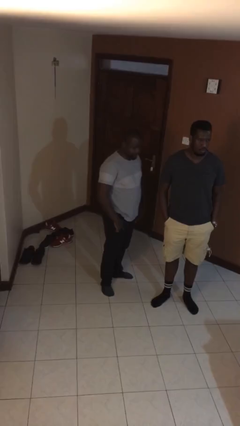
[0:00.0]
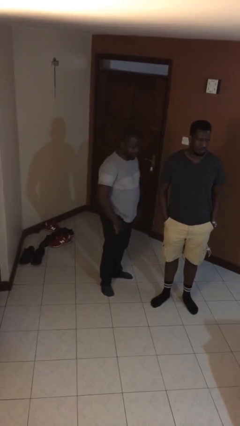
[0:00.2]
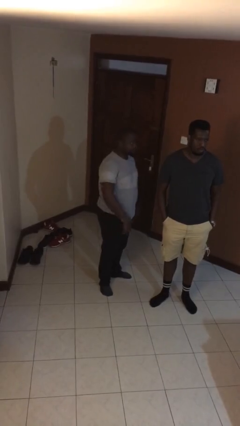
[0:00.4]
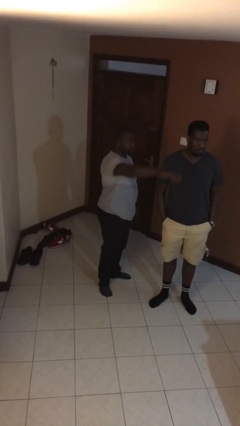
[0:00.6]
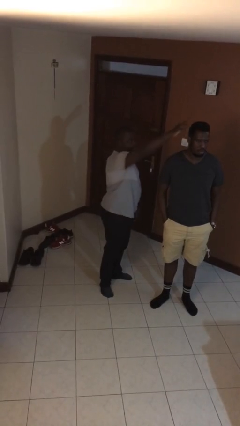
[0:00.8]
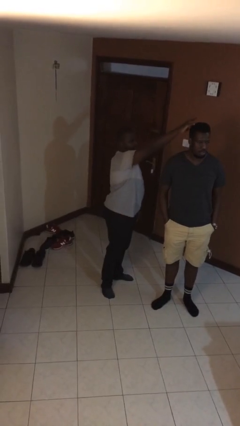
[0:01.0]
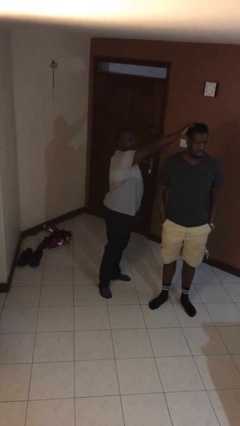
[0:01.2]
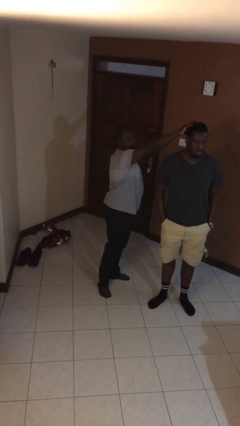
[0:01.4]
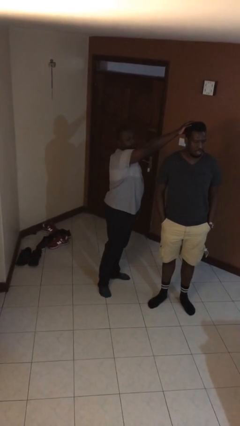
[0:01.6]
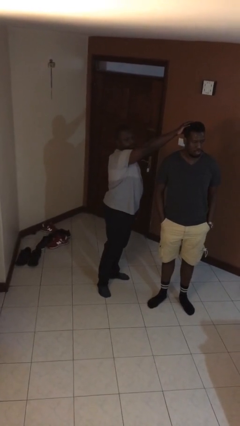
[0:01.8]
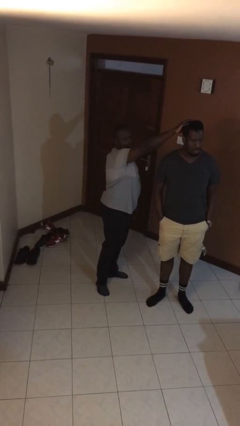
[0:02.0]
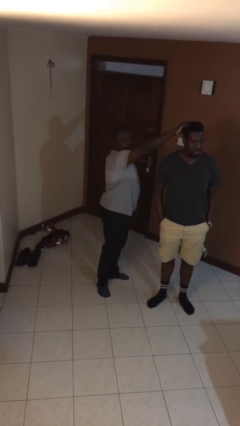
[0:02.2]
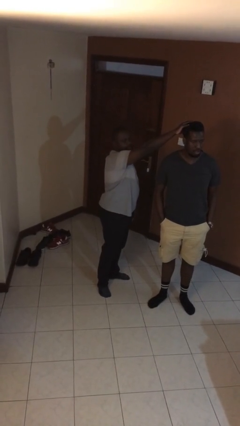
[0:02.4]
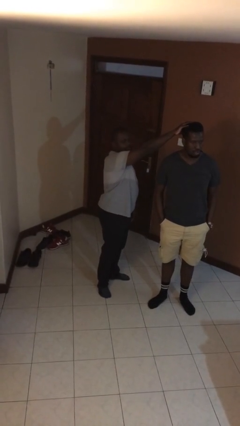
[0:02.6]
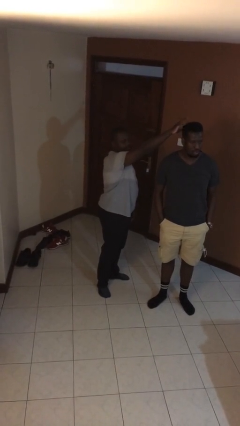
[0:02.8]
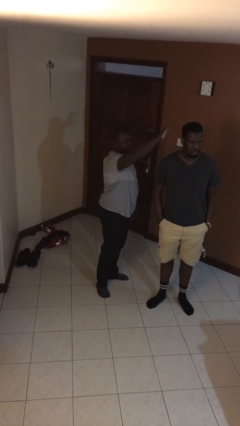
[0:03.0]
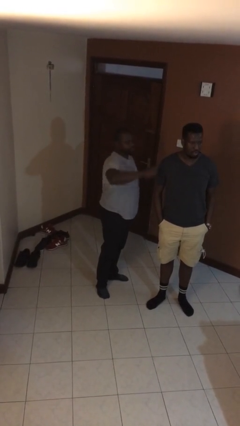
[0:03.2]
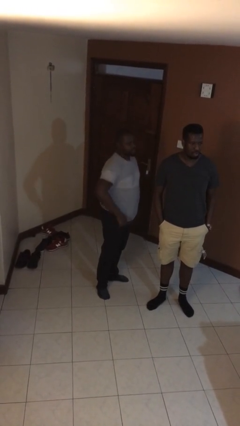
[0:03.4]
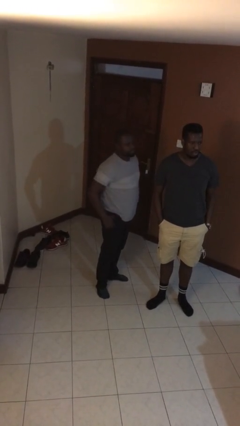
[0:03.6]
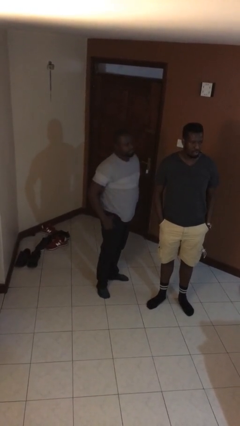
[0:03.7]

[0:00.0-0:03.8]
person grabs person by hair

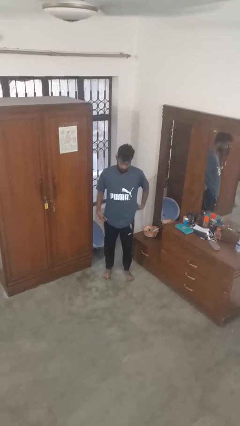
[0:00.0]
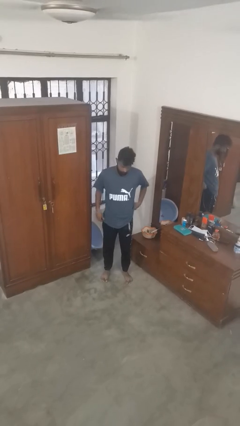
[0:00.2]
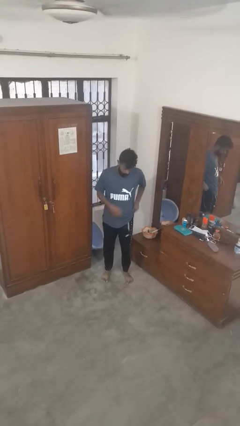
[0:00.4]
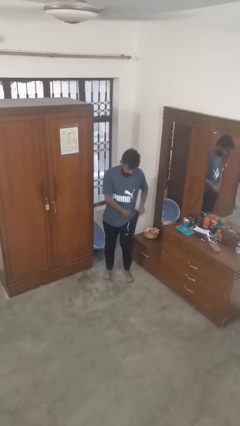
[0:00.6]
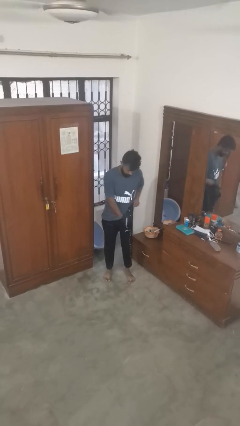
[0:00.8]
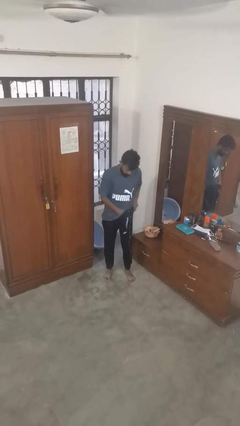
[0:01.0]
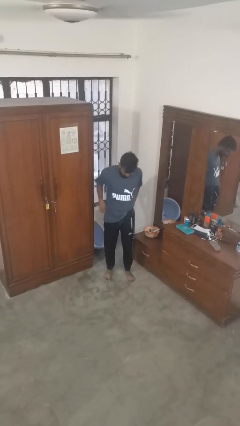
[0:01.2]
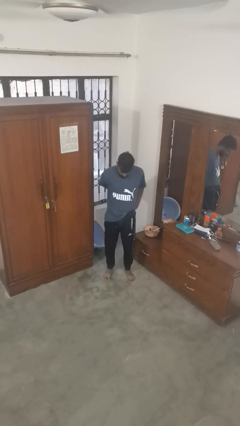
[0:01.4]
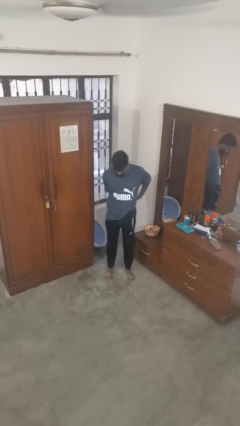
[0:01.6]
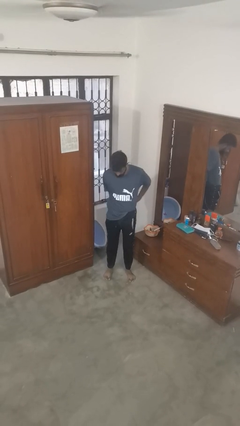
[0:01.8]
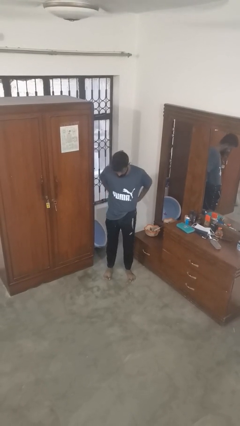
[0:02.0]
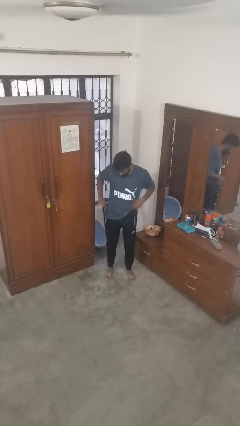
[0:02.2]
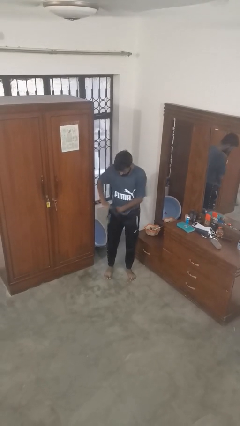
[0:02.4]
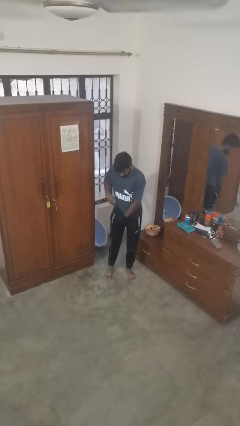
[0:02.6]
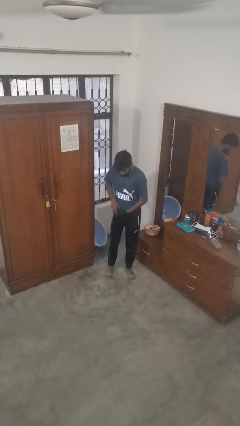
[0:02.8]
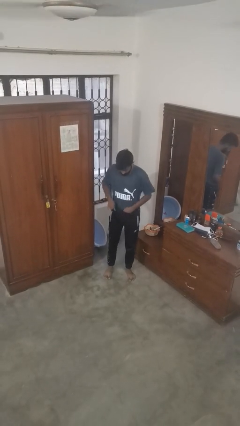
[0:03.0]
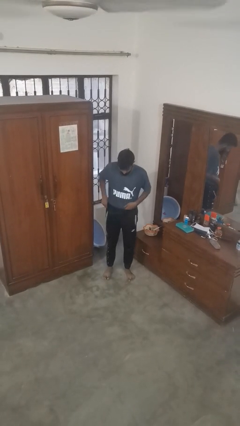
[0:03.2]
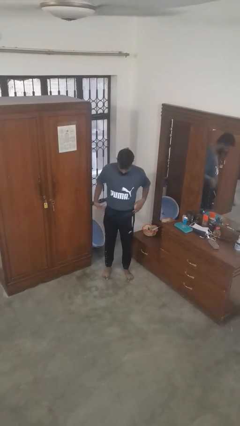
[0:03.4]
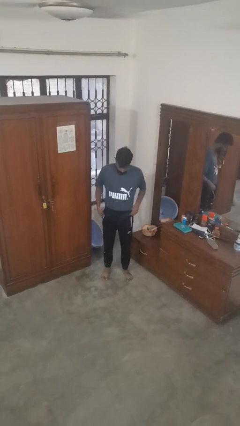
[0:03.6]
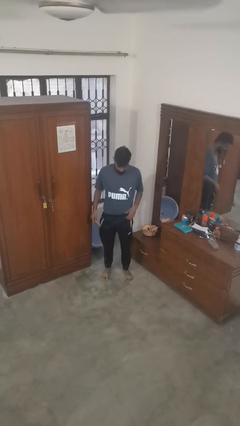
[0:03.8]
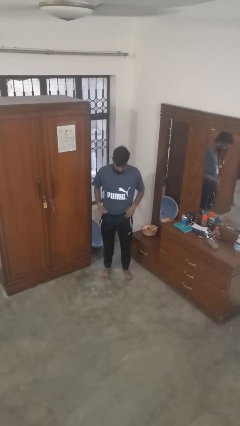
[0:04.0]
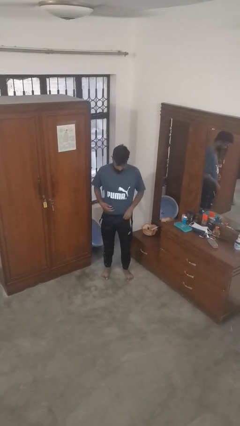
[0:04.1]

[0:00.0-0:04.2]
person tucks in shirt

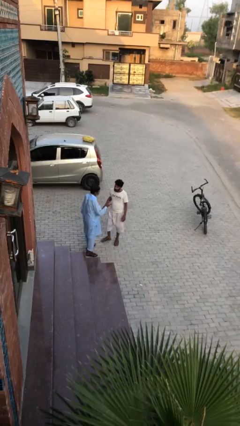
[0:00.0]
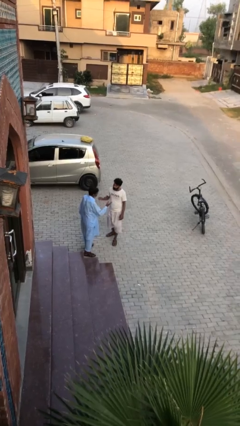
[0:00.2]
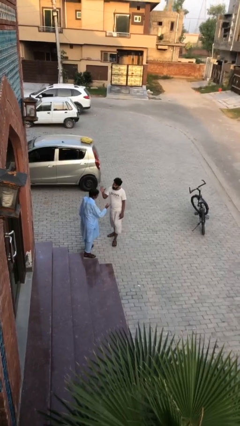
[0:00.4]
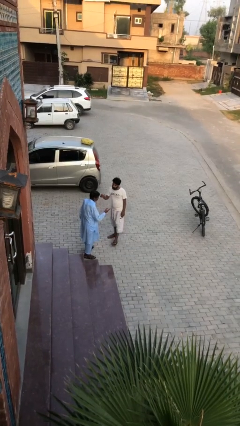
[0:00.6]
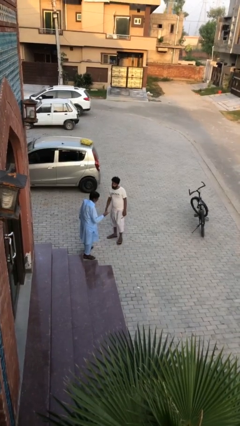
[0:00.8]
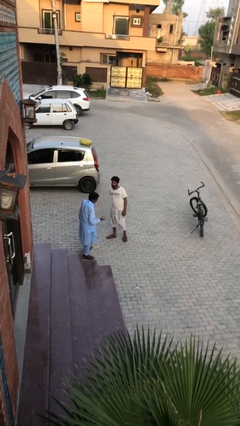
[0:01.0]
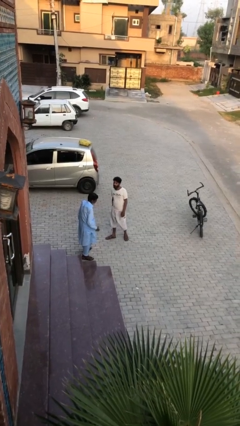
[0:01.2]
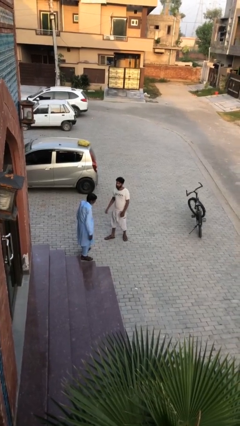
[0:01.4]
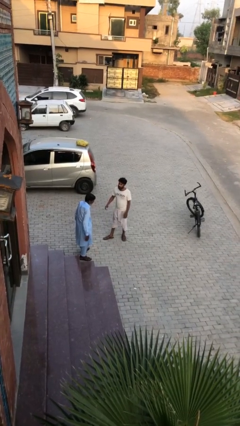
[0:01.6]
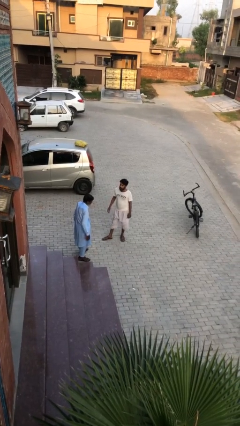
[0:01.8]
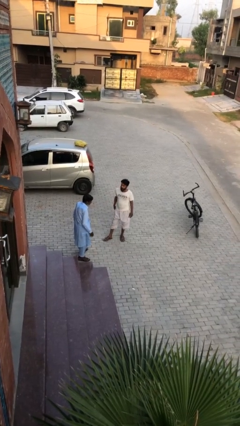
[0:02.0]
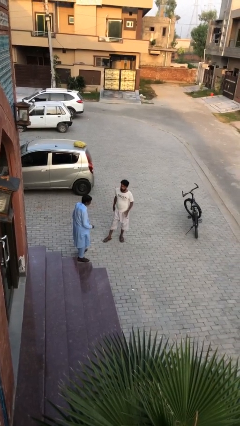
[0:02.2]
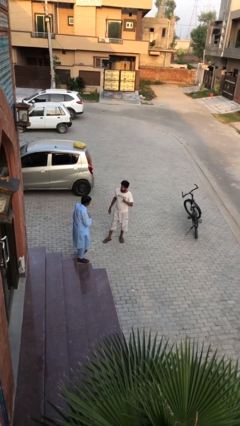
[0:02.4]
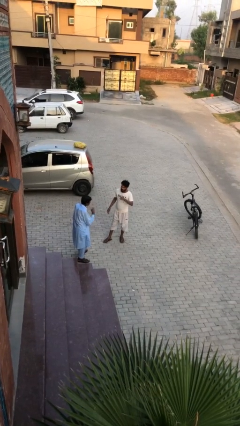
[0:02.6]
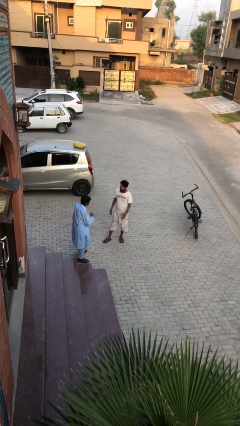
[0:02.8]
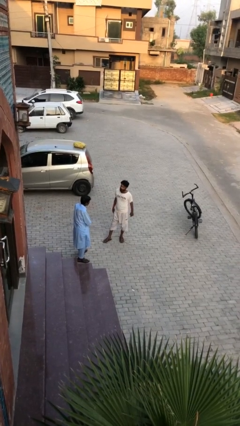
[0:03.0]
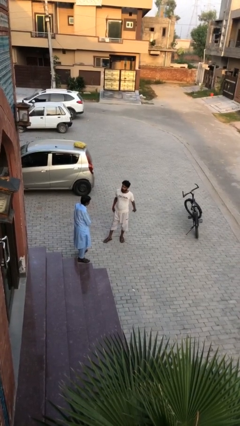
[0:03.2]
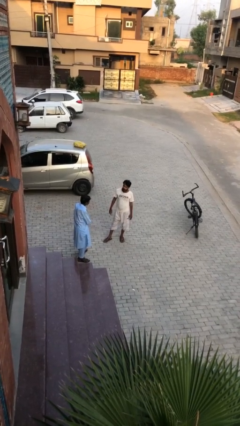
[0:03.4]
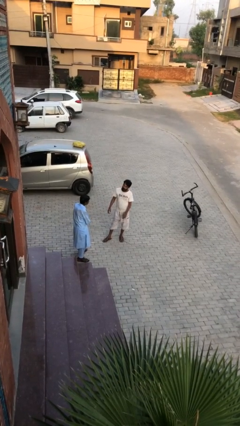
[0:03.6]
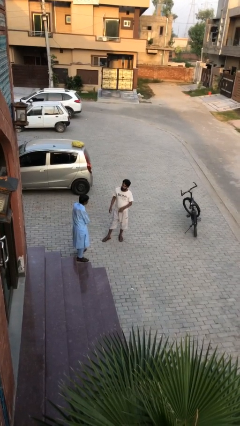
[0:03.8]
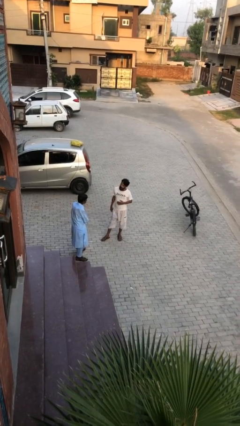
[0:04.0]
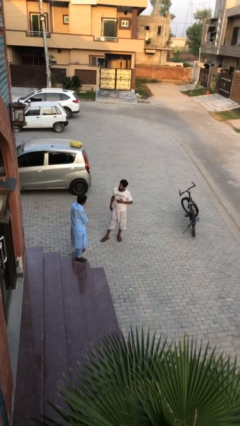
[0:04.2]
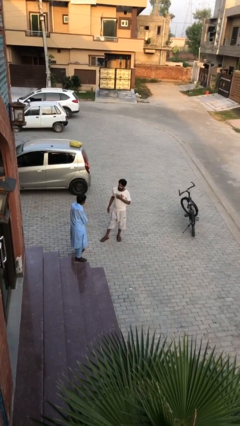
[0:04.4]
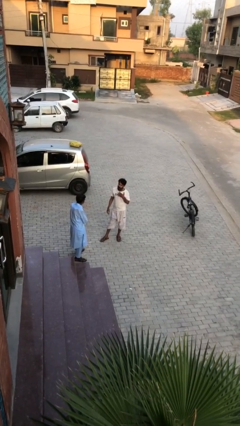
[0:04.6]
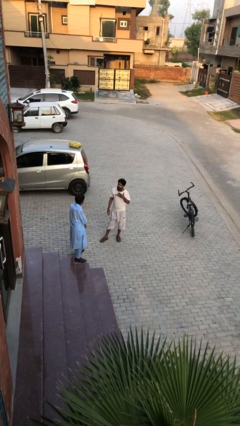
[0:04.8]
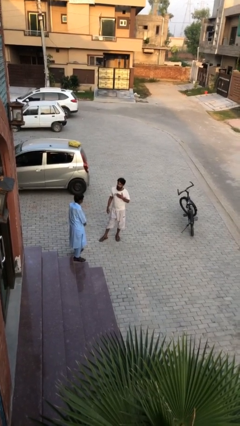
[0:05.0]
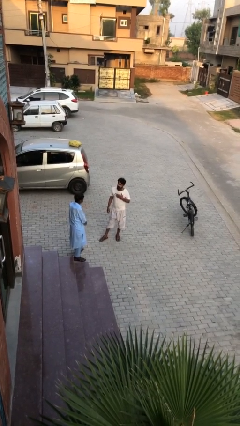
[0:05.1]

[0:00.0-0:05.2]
person talks to person

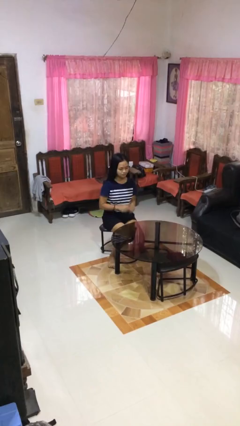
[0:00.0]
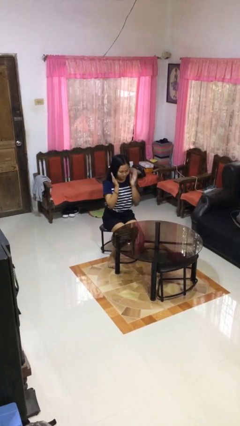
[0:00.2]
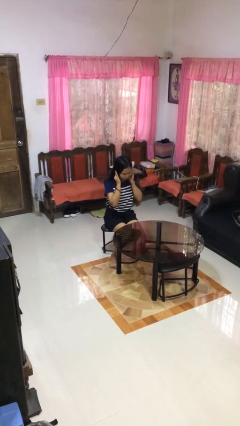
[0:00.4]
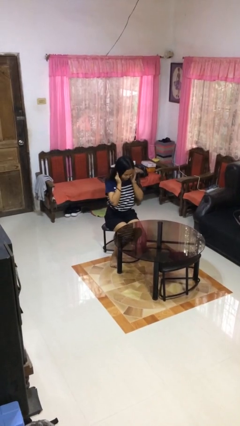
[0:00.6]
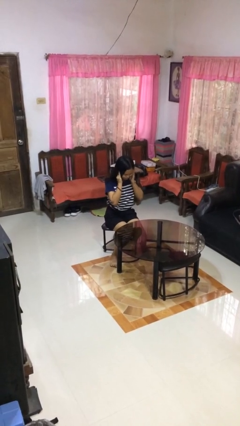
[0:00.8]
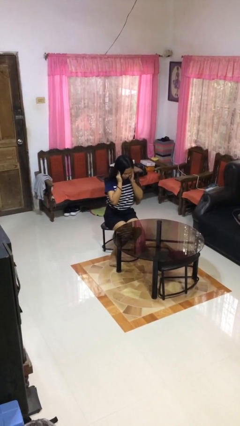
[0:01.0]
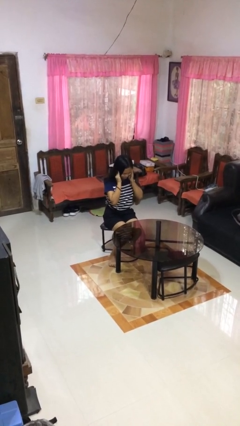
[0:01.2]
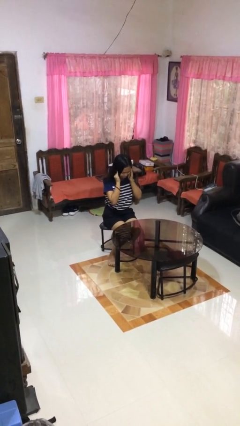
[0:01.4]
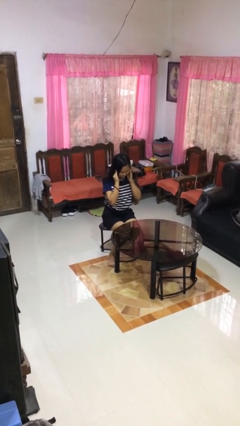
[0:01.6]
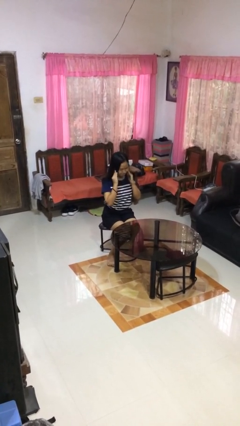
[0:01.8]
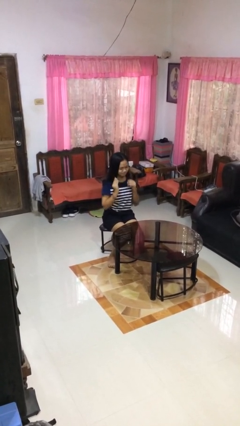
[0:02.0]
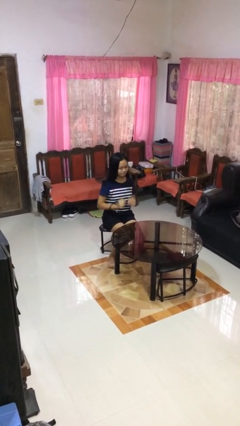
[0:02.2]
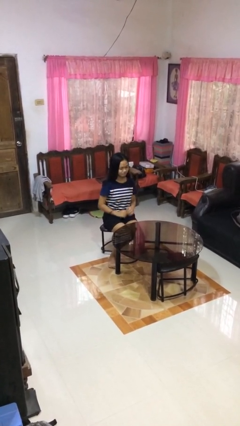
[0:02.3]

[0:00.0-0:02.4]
person puts fingers in ear

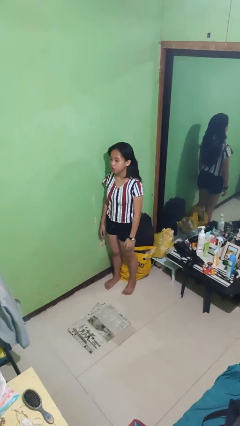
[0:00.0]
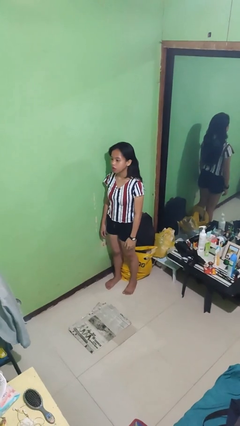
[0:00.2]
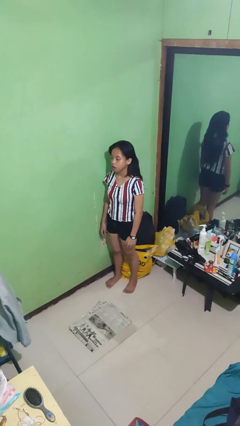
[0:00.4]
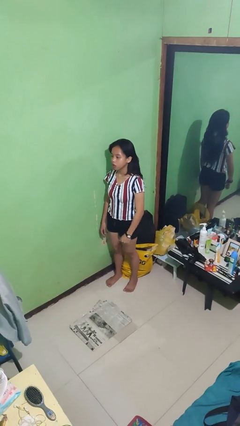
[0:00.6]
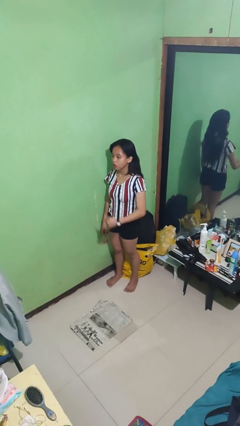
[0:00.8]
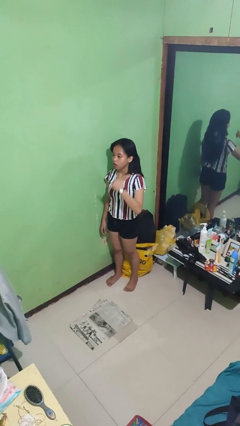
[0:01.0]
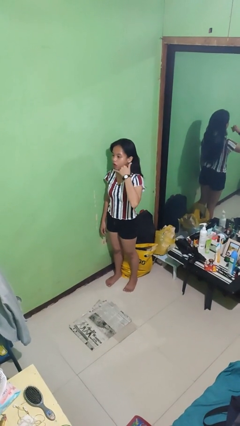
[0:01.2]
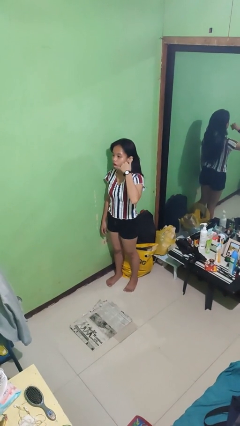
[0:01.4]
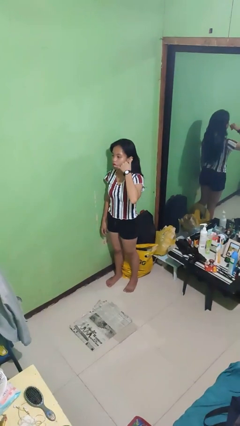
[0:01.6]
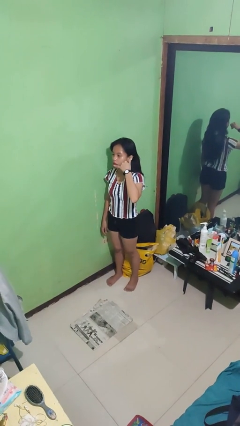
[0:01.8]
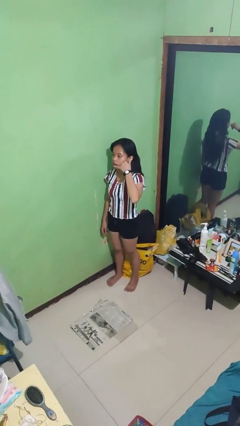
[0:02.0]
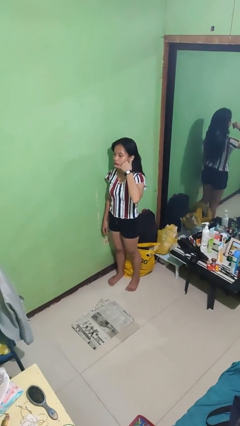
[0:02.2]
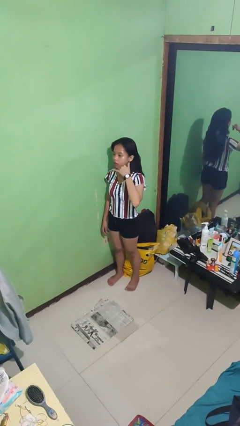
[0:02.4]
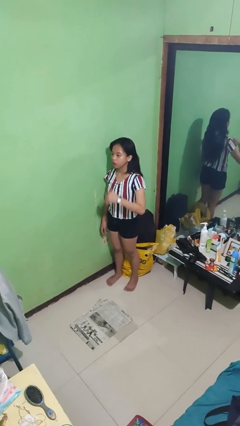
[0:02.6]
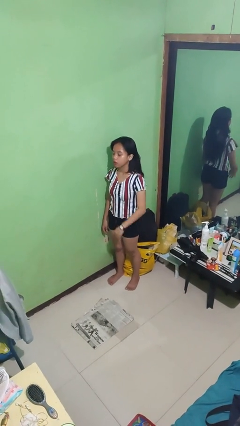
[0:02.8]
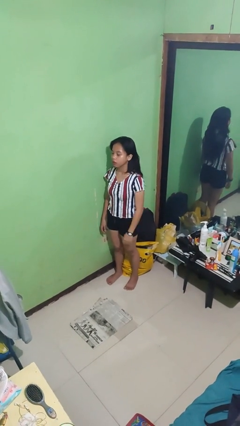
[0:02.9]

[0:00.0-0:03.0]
person gestures call me
